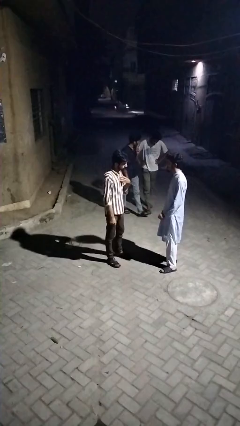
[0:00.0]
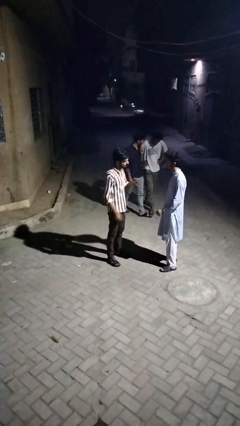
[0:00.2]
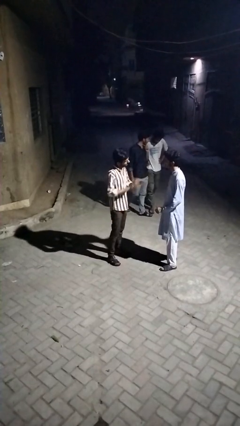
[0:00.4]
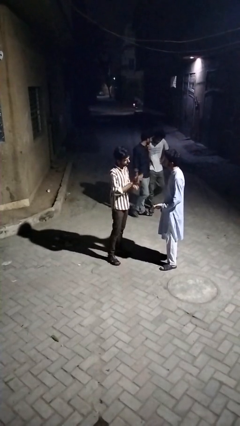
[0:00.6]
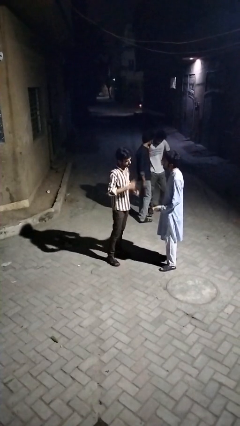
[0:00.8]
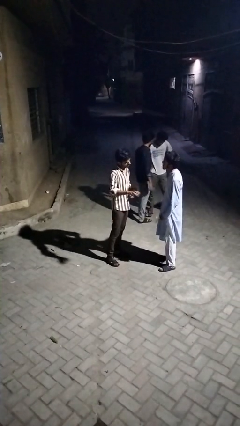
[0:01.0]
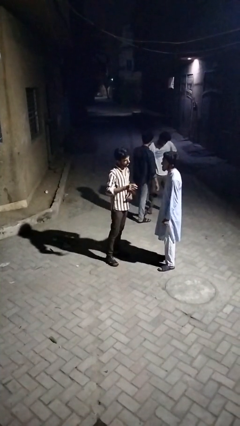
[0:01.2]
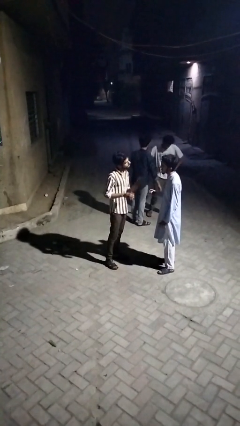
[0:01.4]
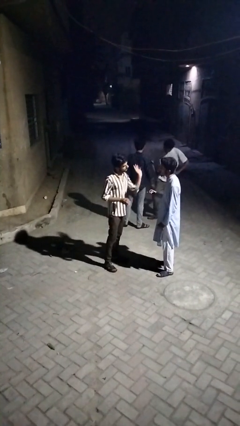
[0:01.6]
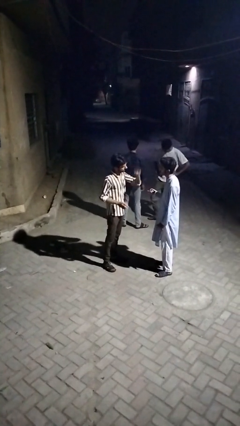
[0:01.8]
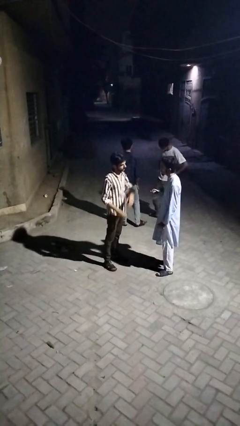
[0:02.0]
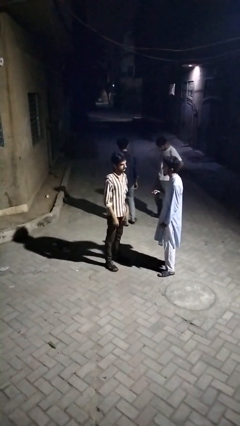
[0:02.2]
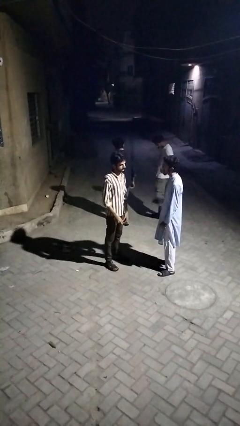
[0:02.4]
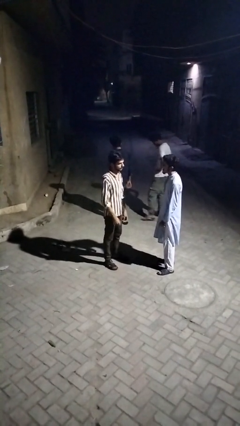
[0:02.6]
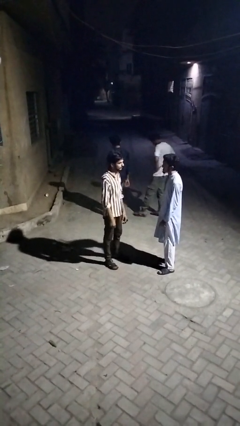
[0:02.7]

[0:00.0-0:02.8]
person talks to person

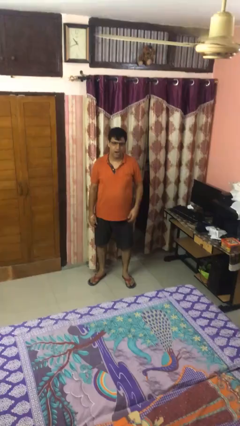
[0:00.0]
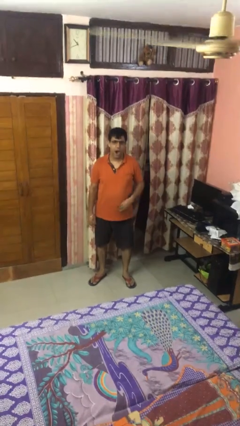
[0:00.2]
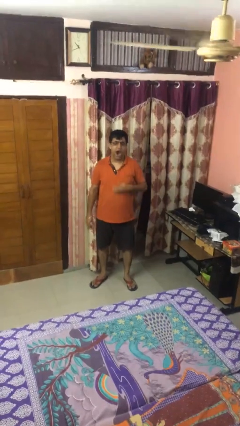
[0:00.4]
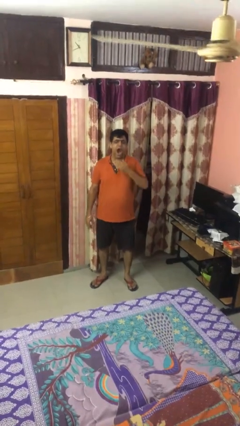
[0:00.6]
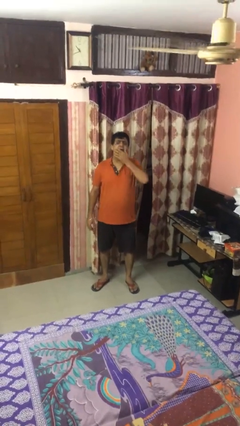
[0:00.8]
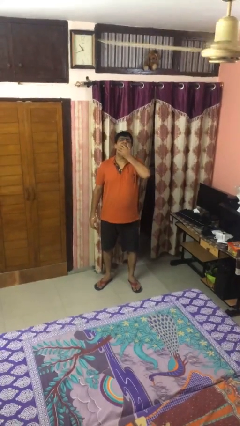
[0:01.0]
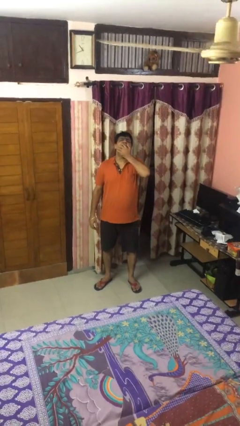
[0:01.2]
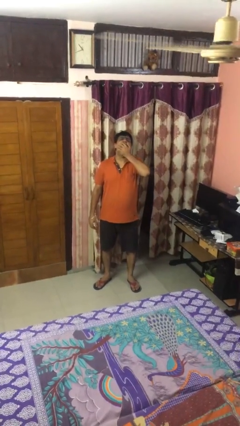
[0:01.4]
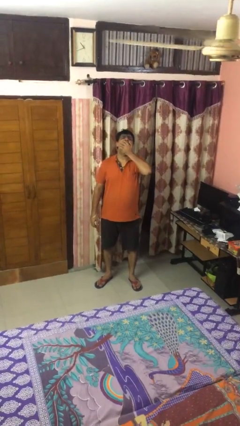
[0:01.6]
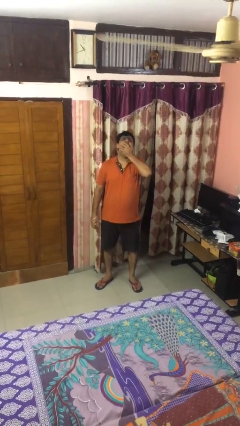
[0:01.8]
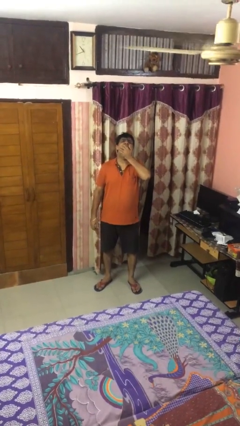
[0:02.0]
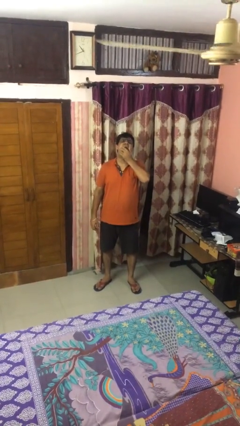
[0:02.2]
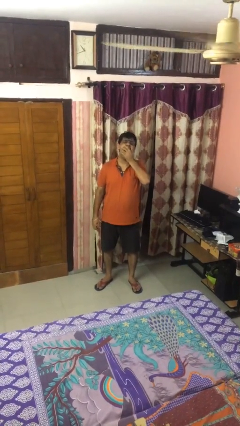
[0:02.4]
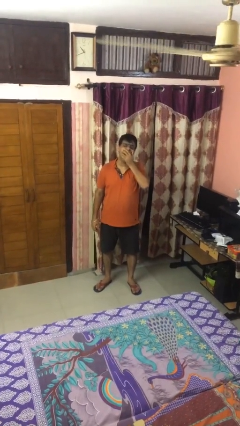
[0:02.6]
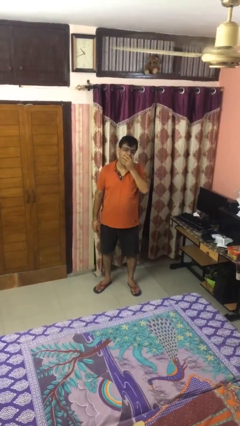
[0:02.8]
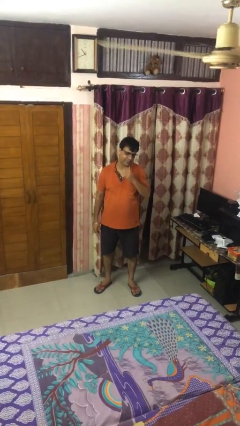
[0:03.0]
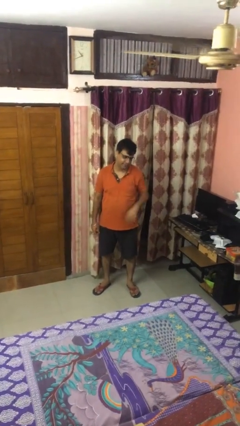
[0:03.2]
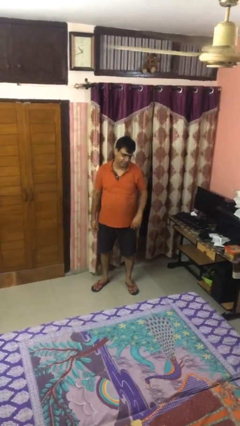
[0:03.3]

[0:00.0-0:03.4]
person yawns

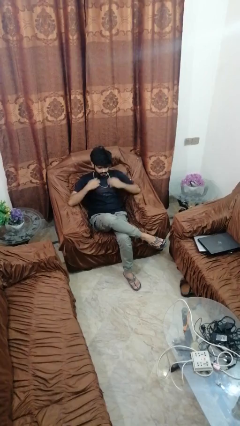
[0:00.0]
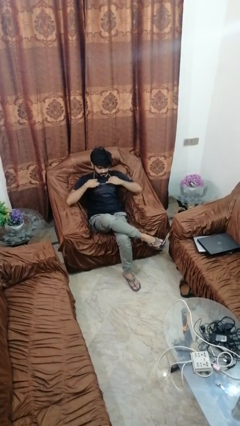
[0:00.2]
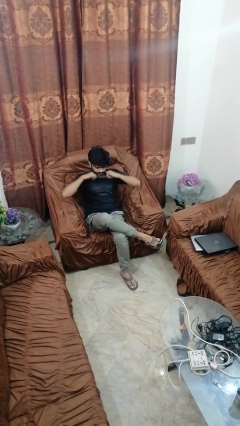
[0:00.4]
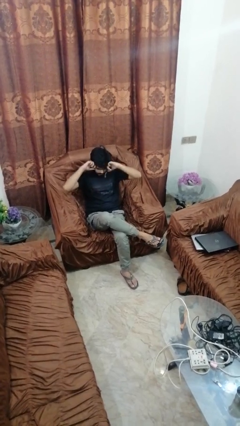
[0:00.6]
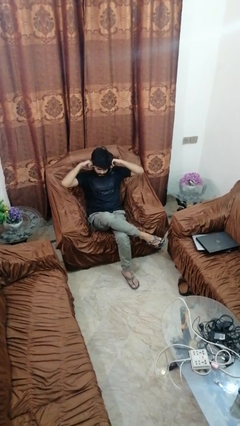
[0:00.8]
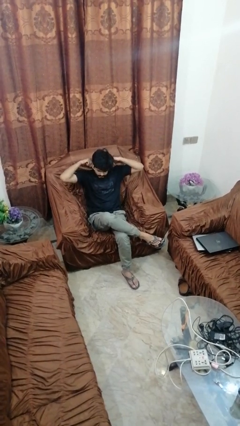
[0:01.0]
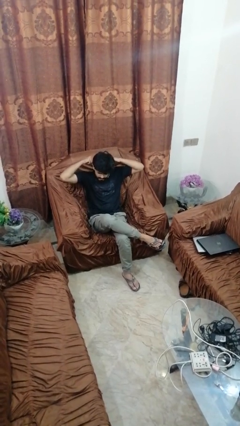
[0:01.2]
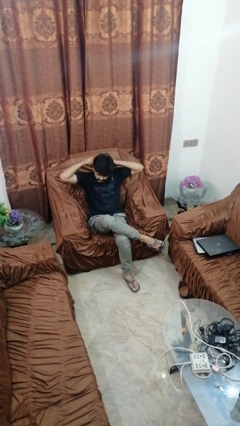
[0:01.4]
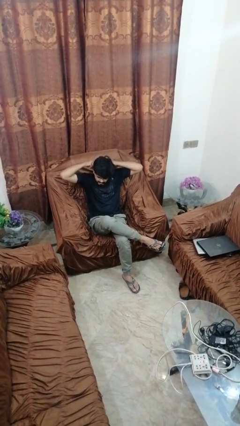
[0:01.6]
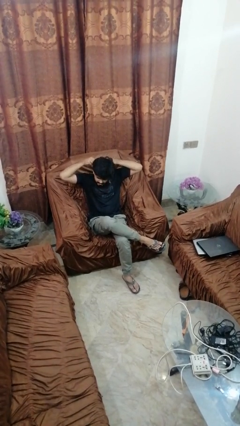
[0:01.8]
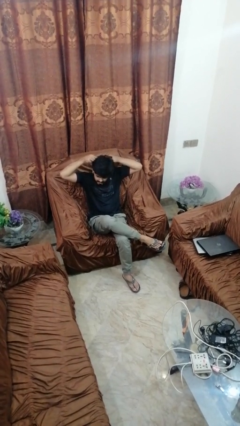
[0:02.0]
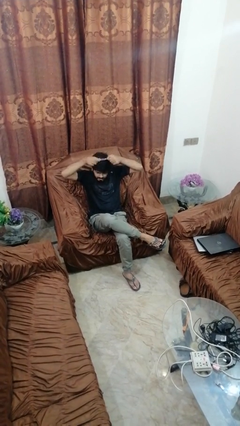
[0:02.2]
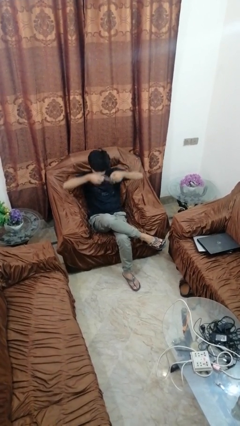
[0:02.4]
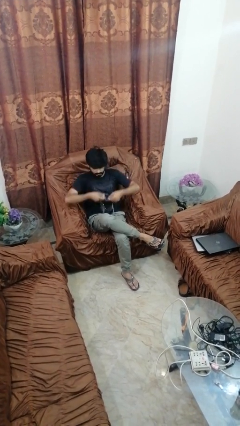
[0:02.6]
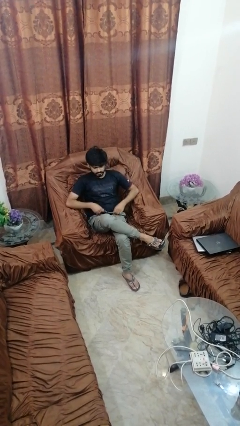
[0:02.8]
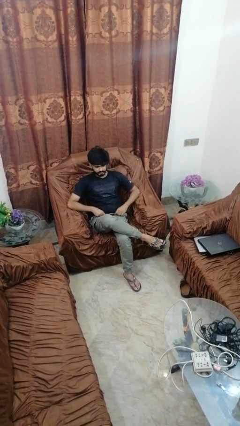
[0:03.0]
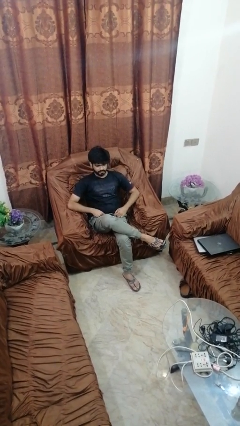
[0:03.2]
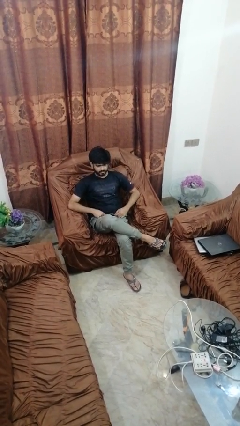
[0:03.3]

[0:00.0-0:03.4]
person takes off necklace

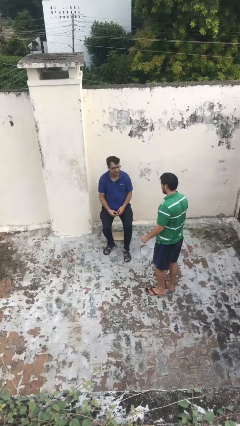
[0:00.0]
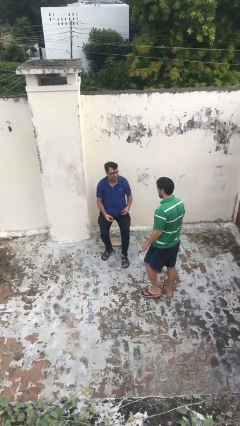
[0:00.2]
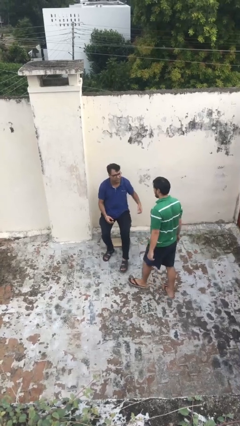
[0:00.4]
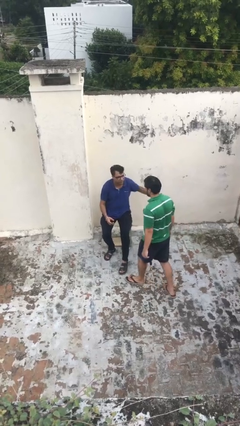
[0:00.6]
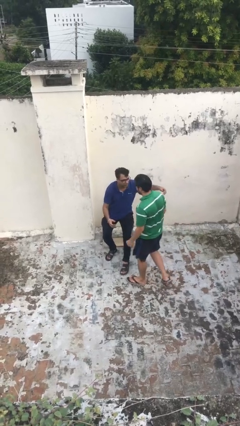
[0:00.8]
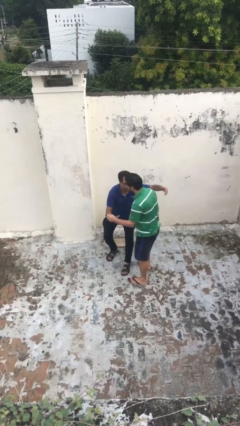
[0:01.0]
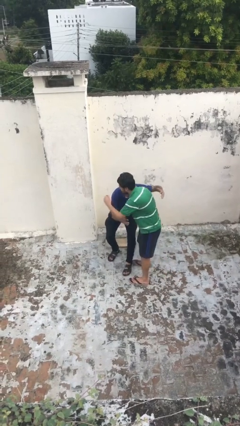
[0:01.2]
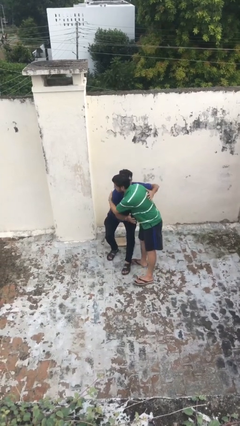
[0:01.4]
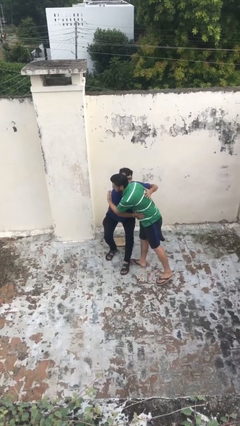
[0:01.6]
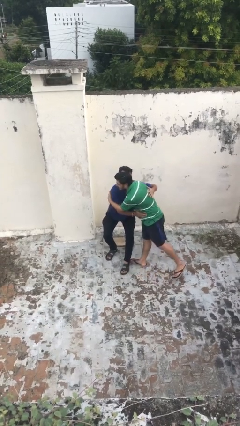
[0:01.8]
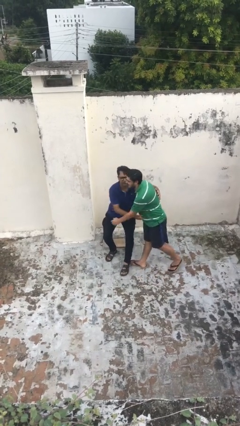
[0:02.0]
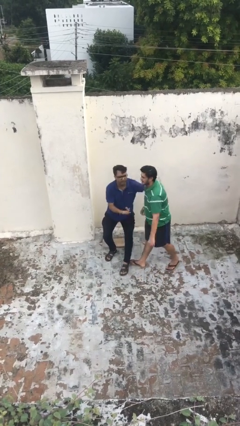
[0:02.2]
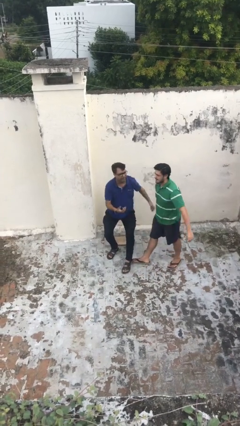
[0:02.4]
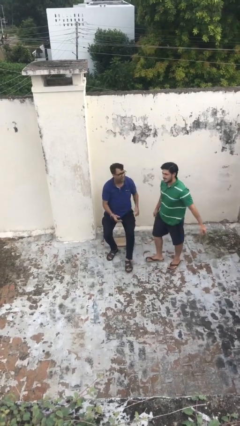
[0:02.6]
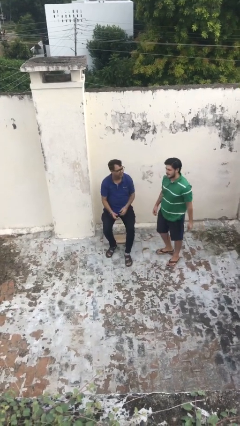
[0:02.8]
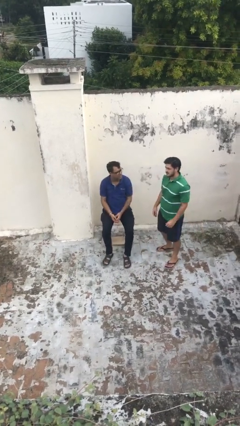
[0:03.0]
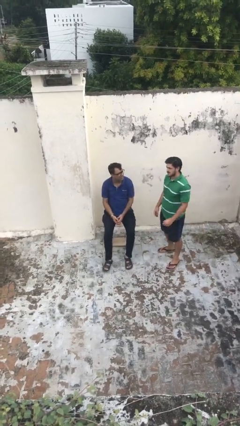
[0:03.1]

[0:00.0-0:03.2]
person embraces person

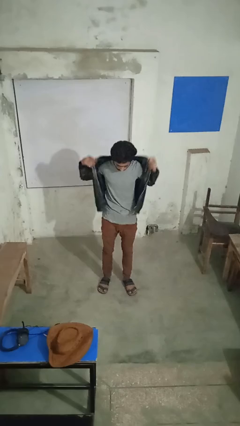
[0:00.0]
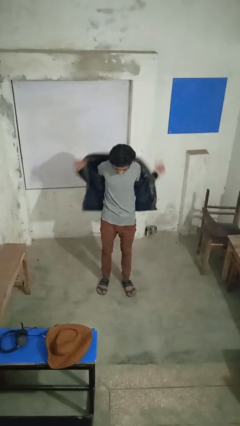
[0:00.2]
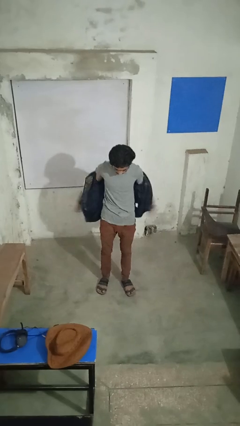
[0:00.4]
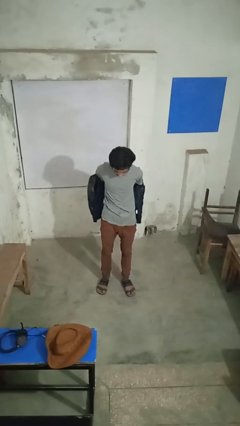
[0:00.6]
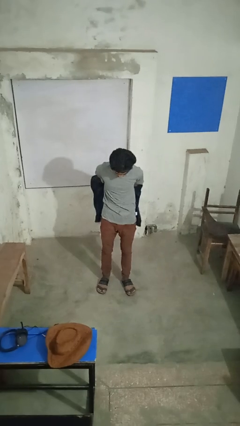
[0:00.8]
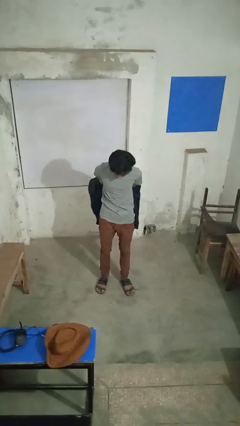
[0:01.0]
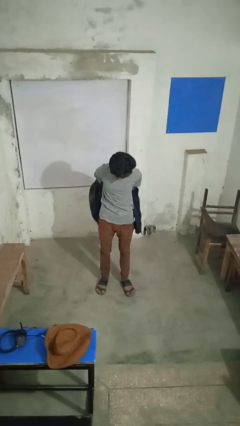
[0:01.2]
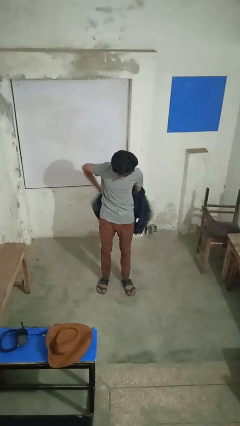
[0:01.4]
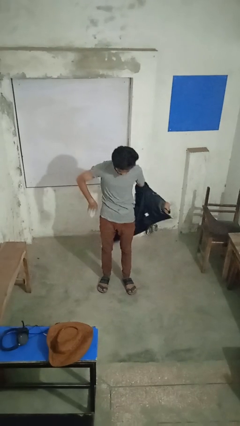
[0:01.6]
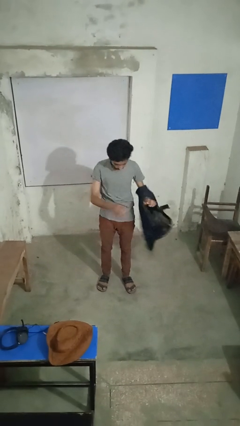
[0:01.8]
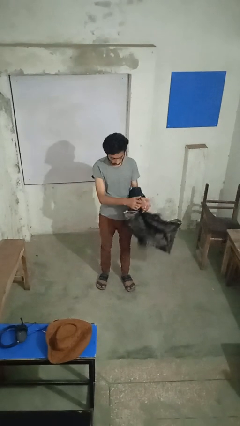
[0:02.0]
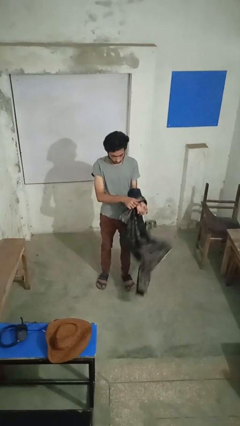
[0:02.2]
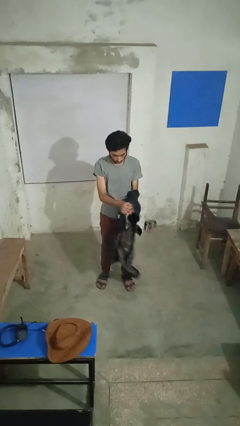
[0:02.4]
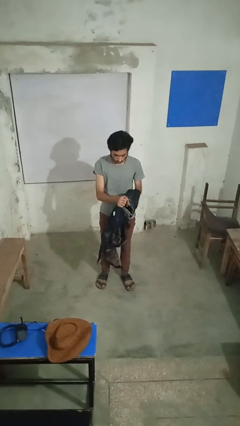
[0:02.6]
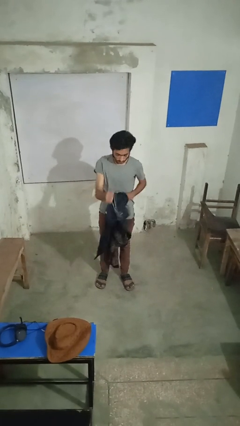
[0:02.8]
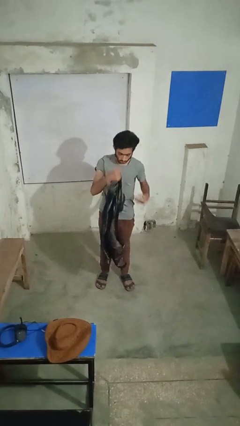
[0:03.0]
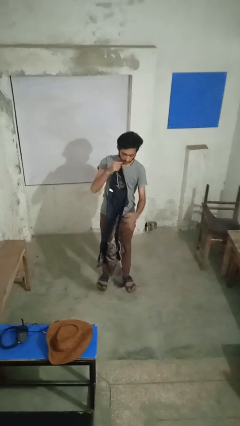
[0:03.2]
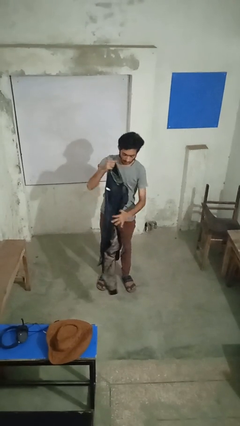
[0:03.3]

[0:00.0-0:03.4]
person takes off jacket

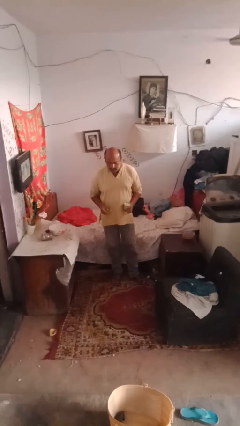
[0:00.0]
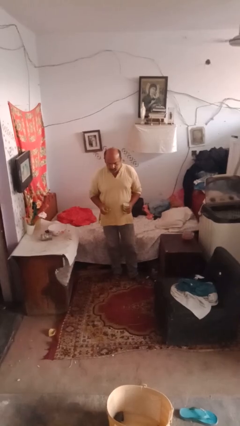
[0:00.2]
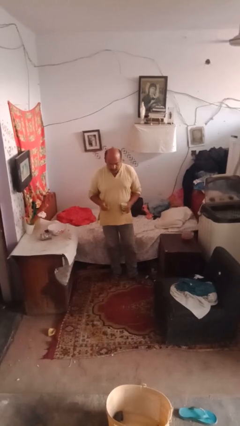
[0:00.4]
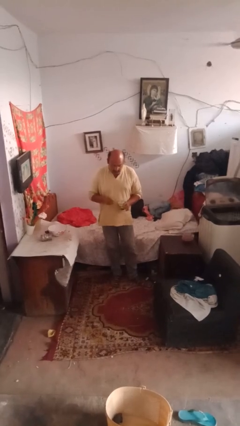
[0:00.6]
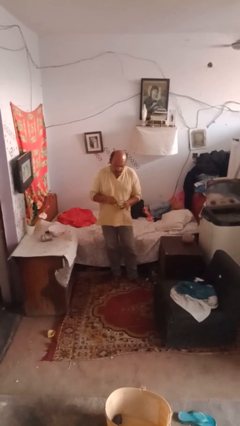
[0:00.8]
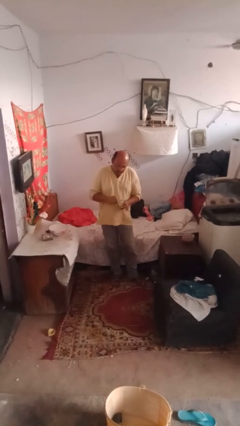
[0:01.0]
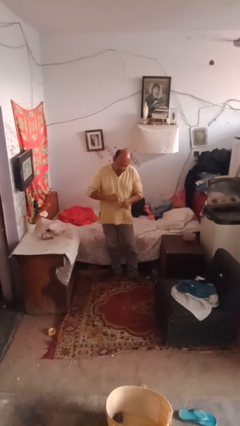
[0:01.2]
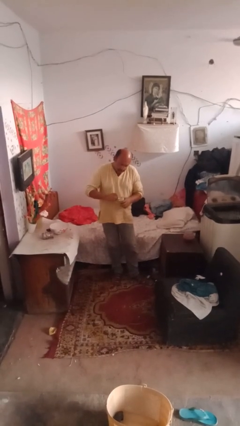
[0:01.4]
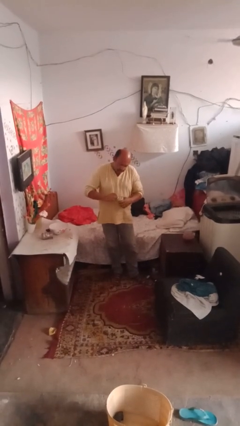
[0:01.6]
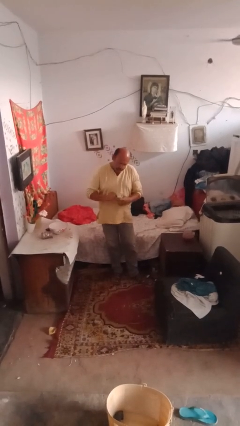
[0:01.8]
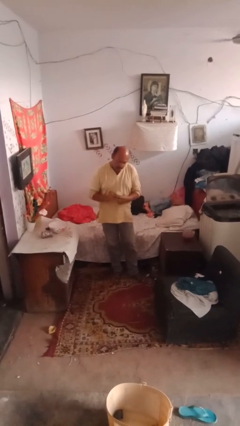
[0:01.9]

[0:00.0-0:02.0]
person opens can with can opener
